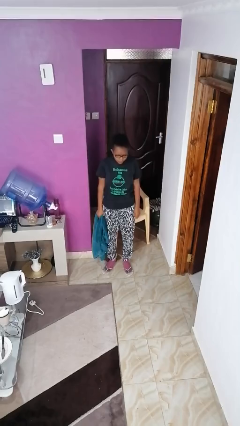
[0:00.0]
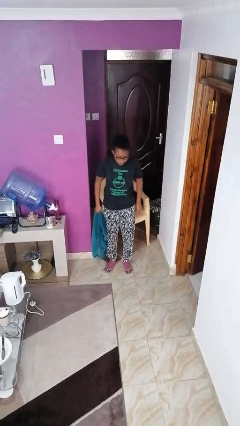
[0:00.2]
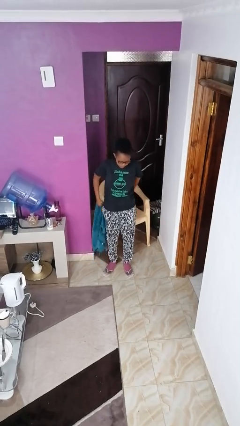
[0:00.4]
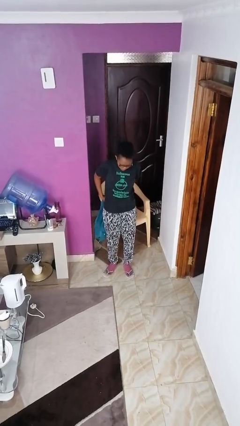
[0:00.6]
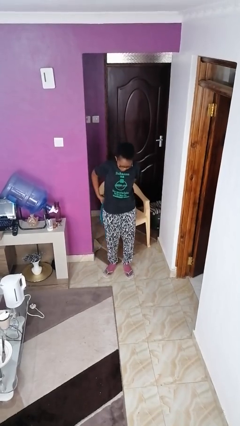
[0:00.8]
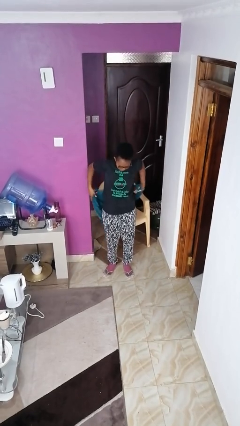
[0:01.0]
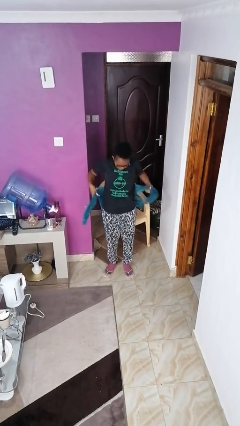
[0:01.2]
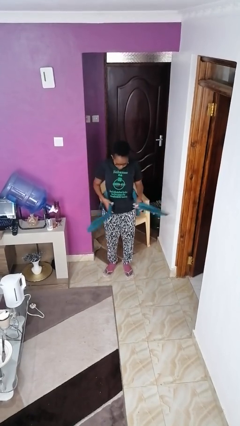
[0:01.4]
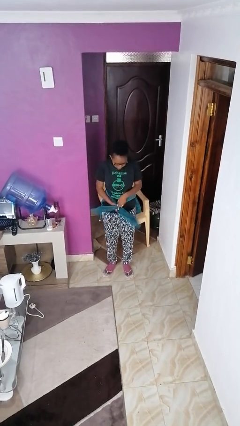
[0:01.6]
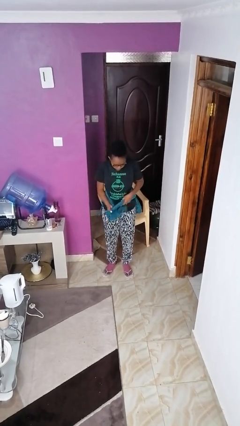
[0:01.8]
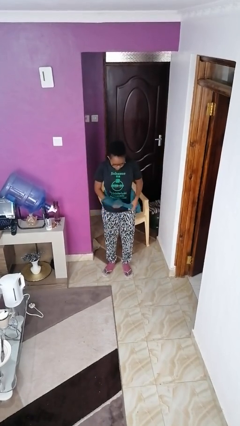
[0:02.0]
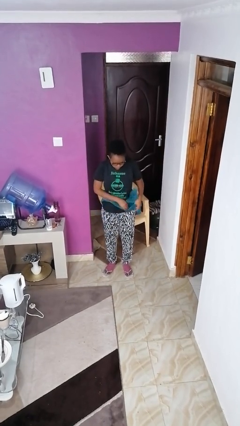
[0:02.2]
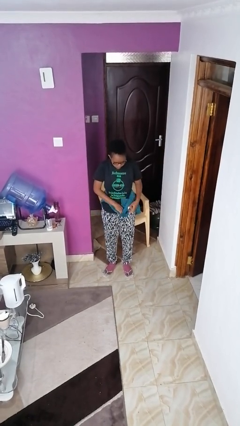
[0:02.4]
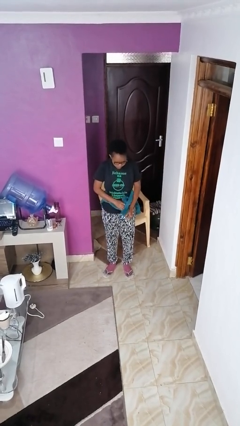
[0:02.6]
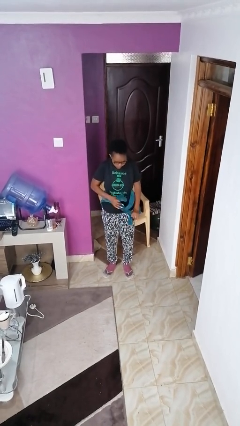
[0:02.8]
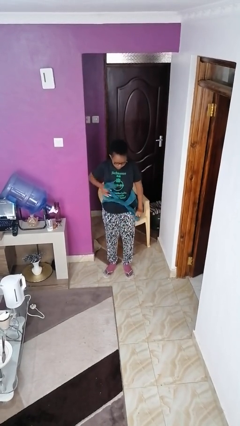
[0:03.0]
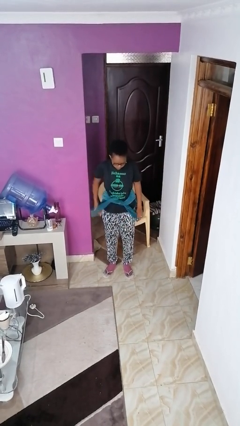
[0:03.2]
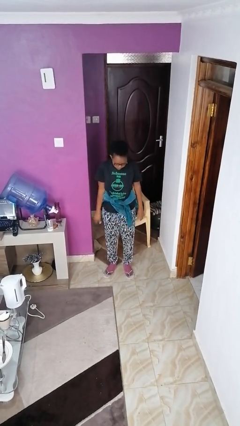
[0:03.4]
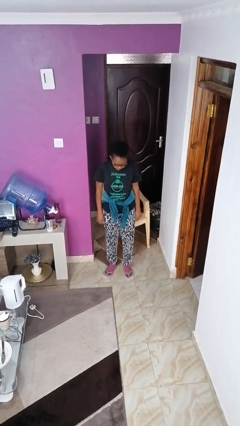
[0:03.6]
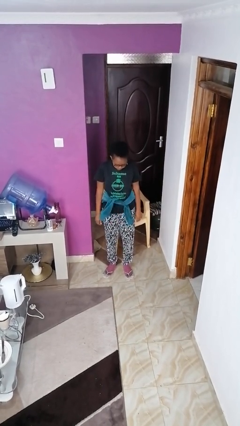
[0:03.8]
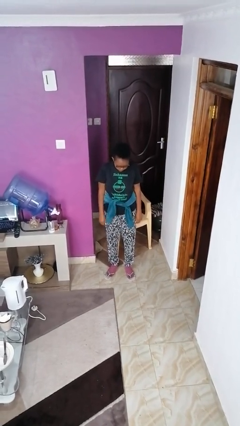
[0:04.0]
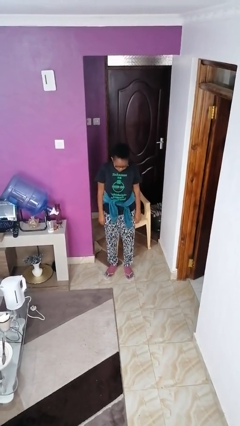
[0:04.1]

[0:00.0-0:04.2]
person ties jacket around waist

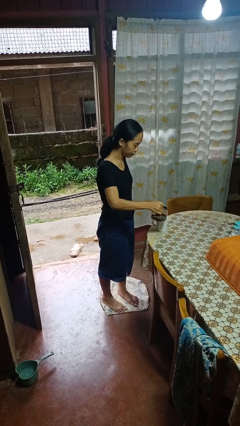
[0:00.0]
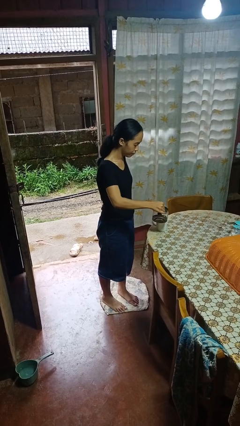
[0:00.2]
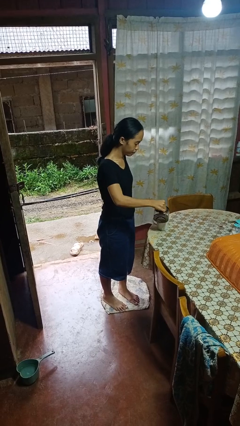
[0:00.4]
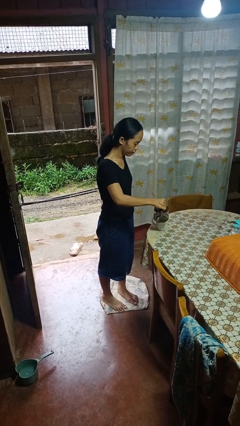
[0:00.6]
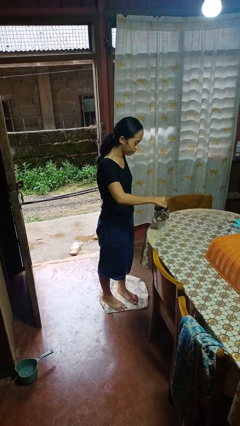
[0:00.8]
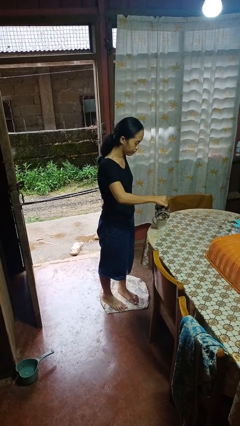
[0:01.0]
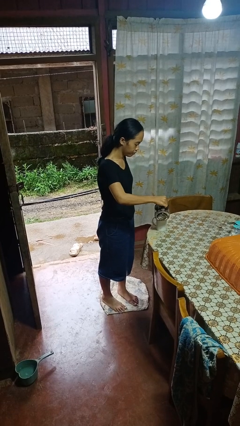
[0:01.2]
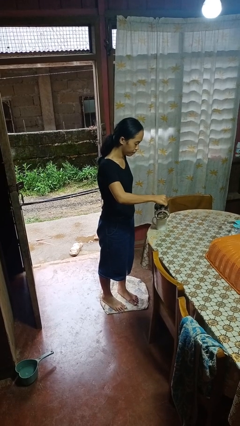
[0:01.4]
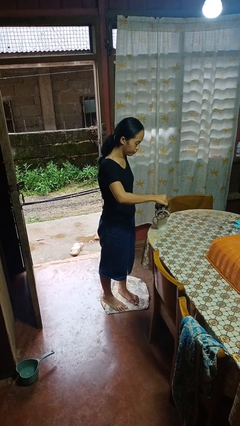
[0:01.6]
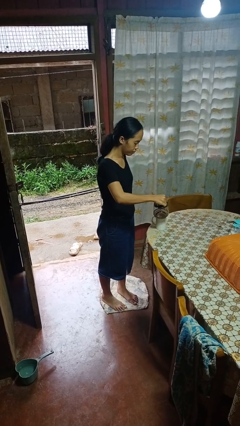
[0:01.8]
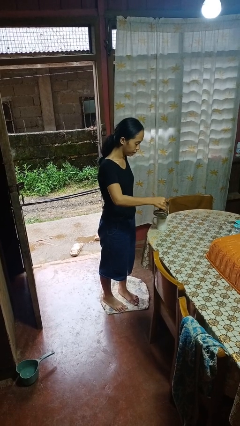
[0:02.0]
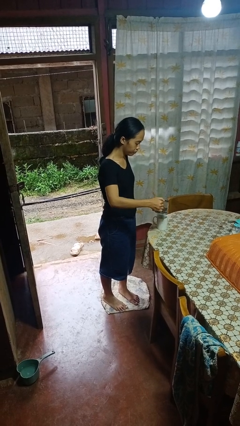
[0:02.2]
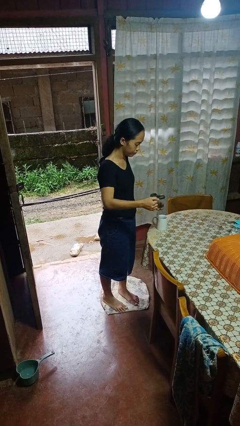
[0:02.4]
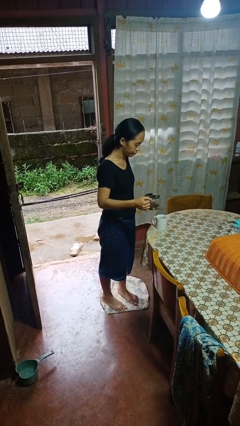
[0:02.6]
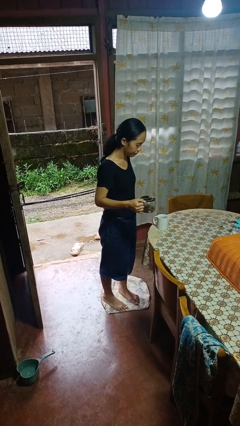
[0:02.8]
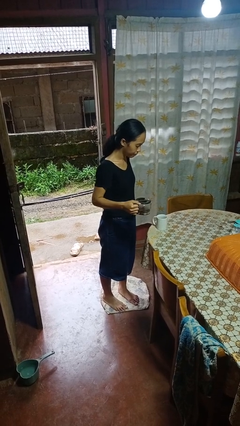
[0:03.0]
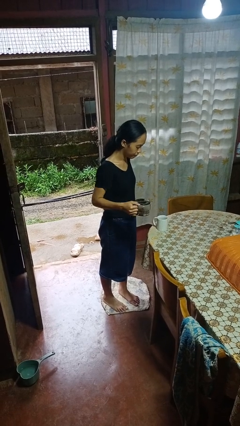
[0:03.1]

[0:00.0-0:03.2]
person pours coffee into mug

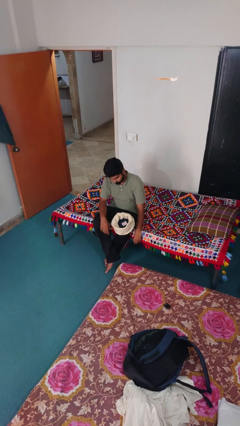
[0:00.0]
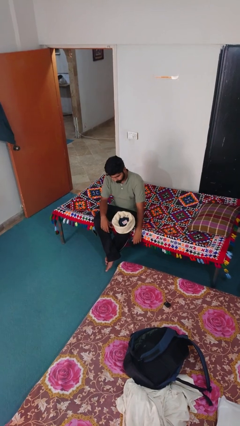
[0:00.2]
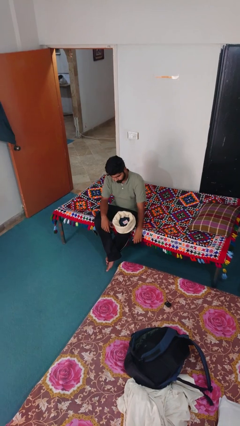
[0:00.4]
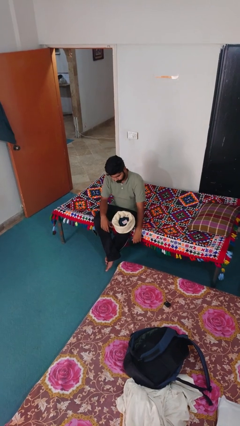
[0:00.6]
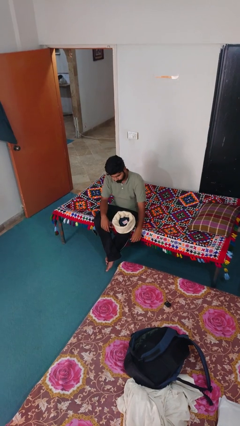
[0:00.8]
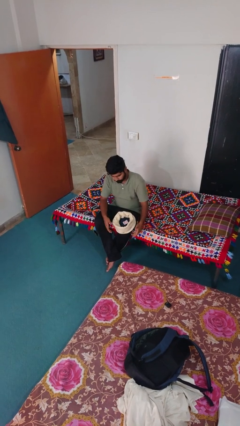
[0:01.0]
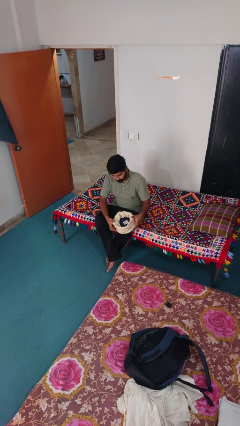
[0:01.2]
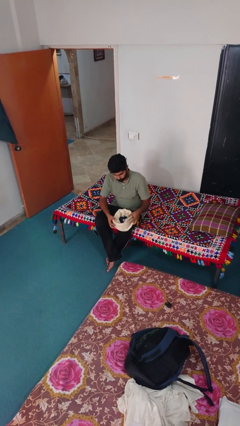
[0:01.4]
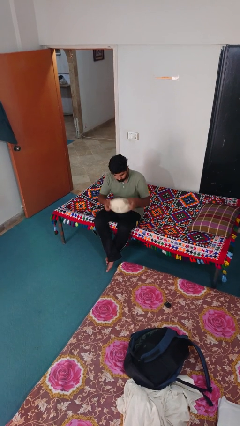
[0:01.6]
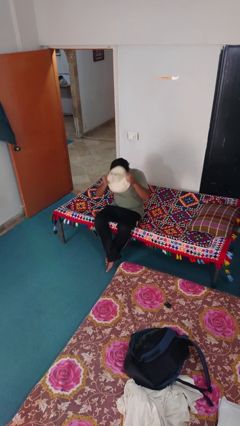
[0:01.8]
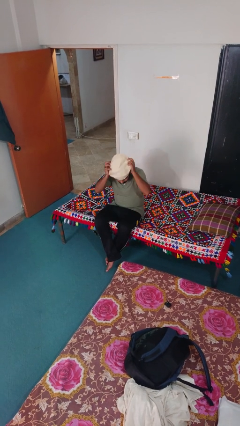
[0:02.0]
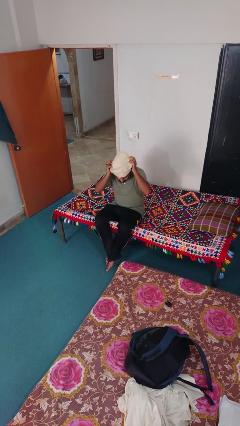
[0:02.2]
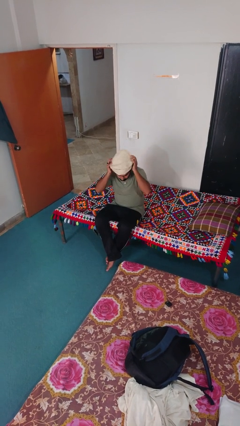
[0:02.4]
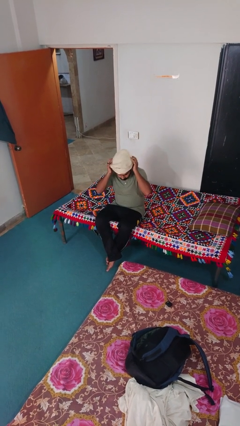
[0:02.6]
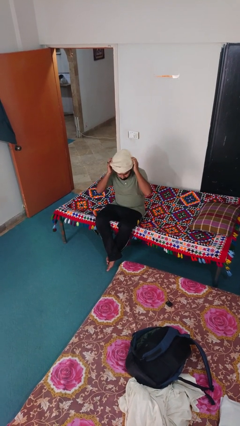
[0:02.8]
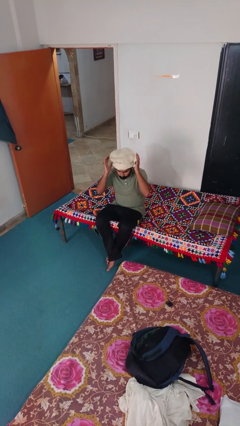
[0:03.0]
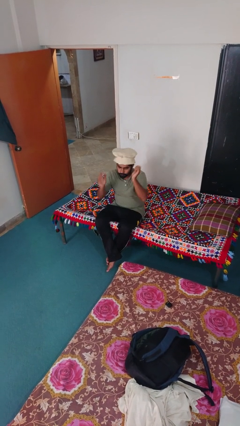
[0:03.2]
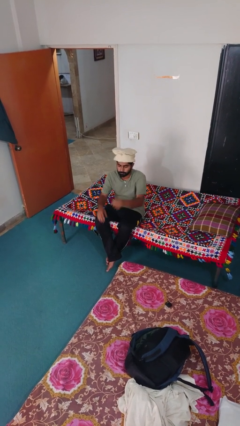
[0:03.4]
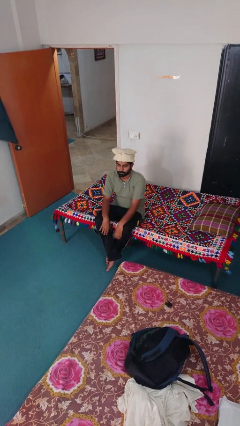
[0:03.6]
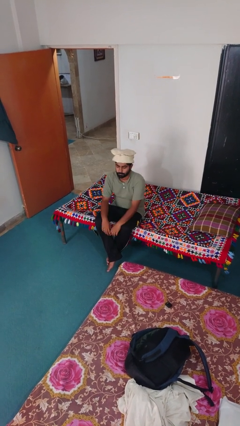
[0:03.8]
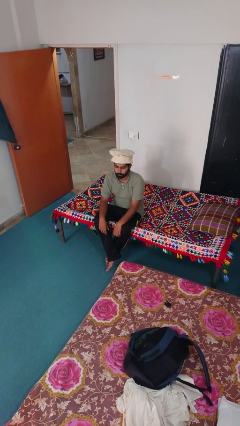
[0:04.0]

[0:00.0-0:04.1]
person puts on hat

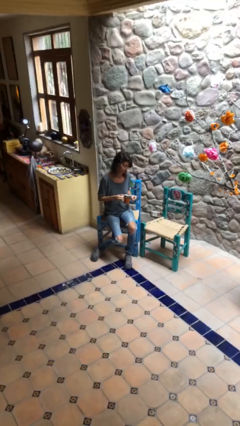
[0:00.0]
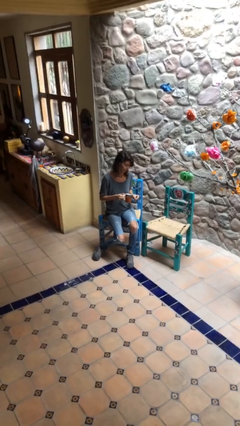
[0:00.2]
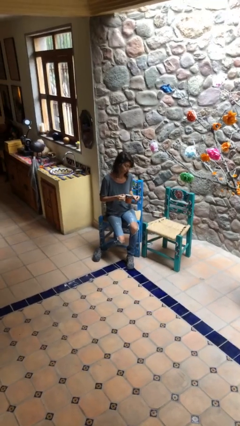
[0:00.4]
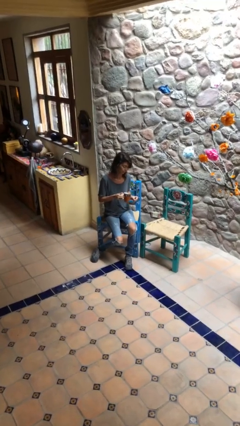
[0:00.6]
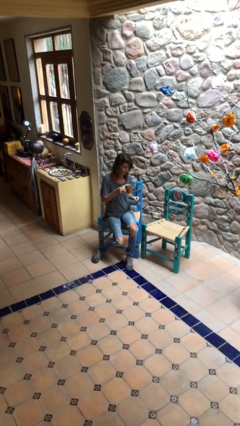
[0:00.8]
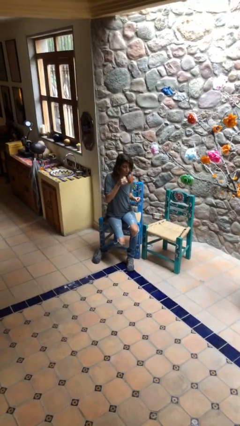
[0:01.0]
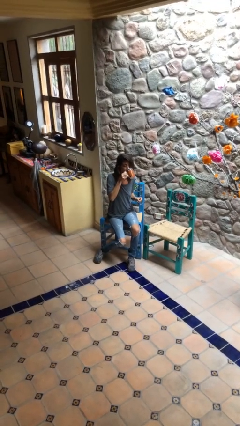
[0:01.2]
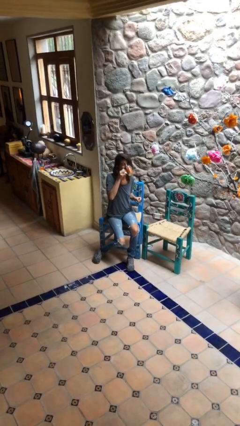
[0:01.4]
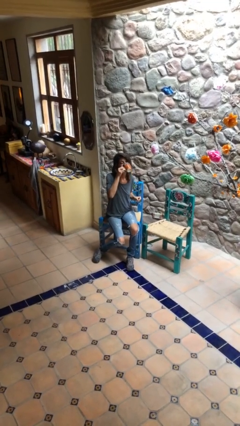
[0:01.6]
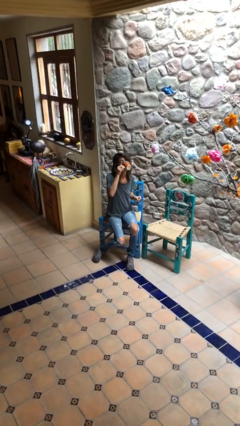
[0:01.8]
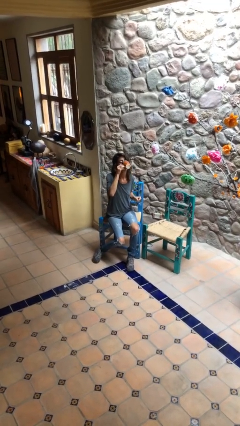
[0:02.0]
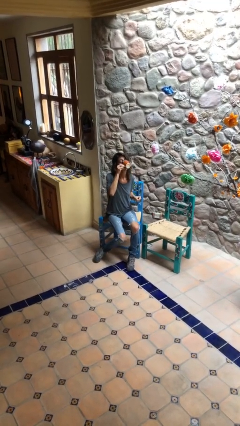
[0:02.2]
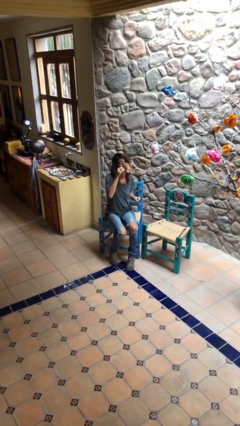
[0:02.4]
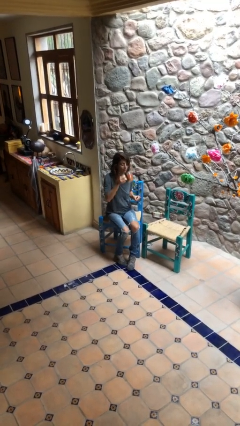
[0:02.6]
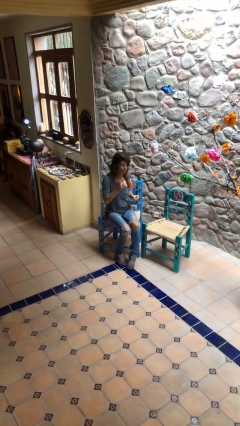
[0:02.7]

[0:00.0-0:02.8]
person drinks from mug

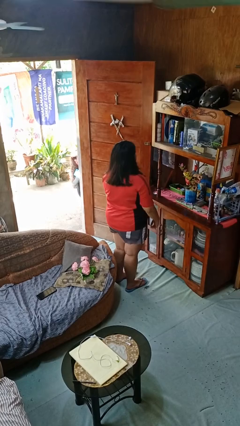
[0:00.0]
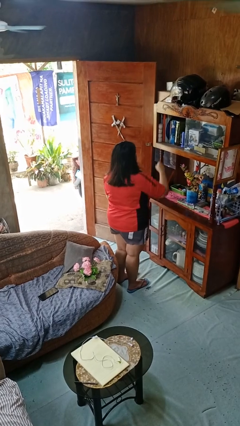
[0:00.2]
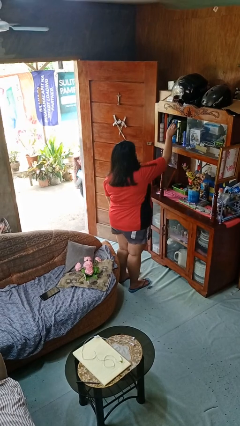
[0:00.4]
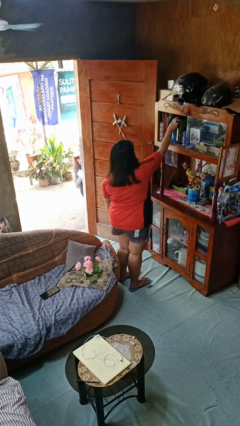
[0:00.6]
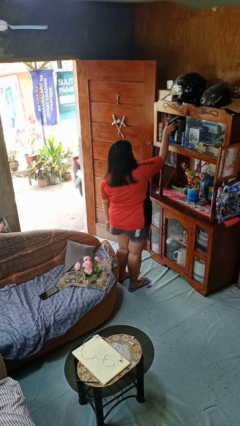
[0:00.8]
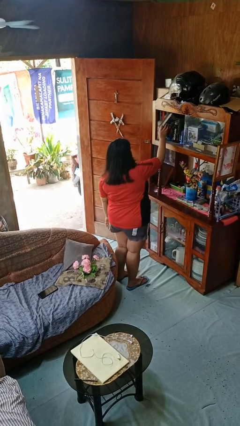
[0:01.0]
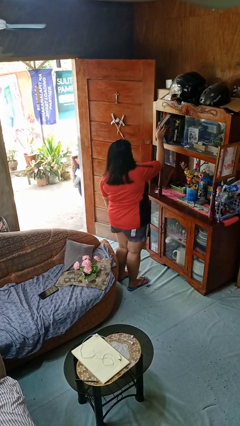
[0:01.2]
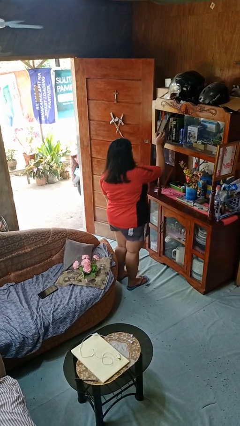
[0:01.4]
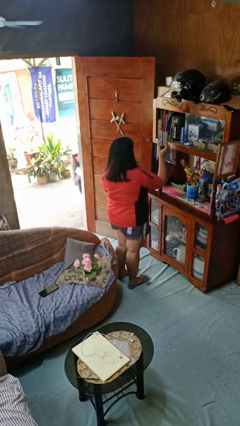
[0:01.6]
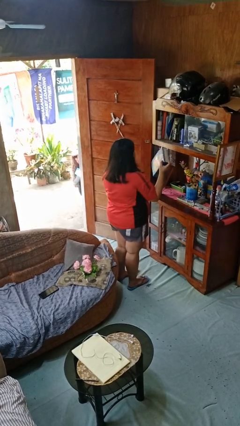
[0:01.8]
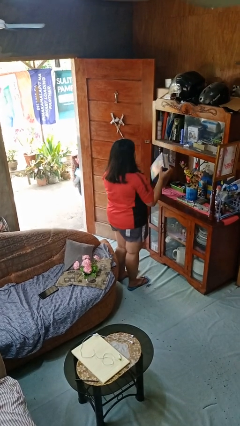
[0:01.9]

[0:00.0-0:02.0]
person picks up object from shelf

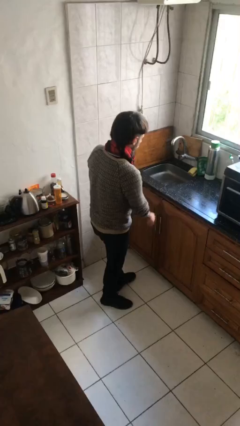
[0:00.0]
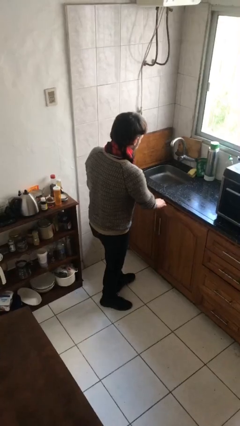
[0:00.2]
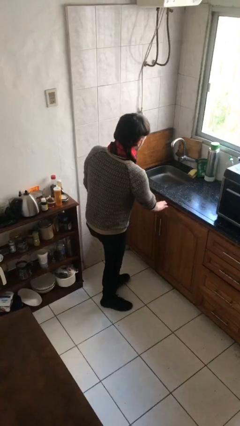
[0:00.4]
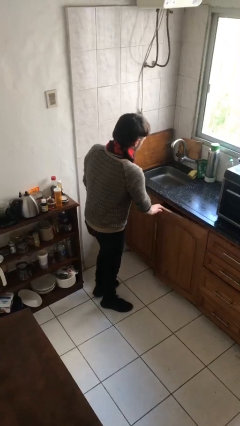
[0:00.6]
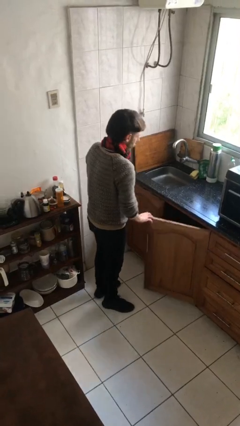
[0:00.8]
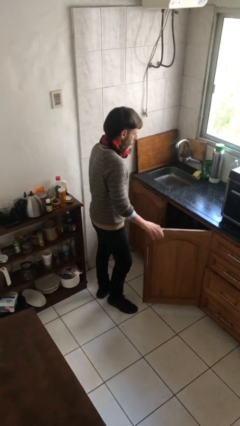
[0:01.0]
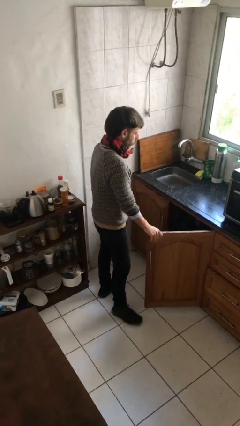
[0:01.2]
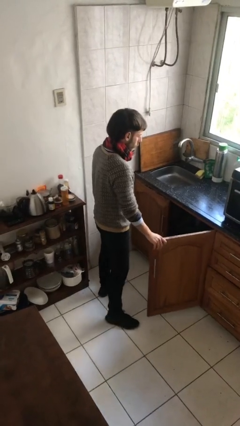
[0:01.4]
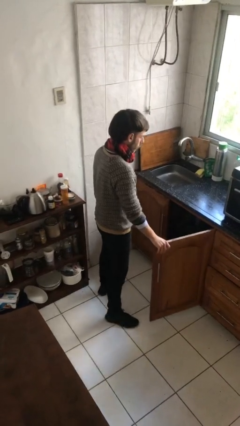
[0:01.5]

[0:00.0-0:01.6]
person closes cabinet
